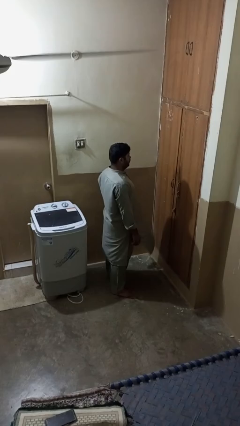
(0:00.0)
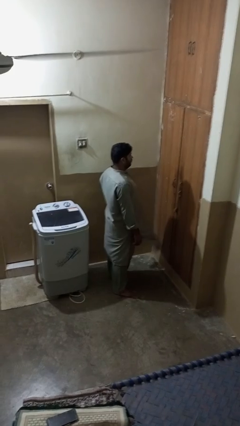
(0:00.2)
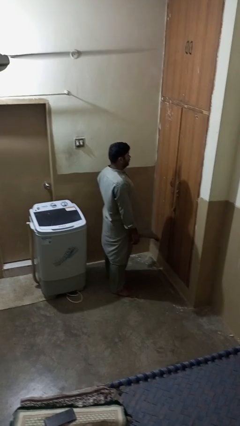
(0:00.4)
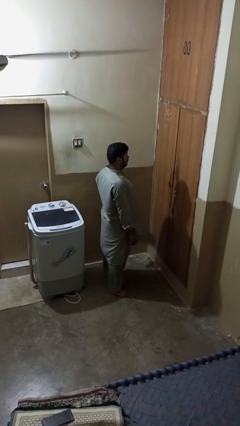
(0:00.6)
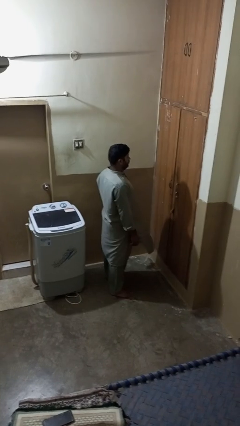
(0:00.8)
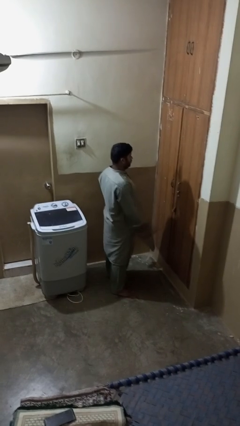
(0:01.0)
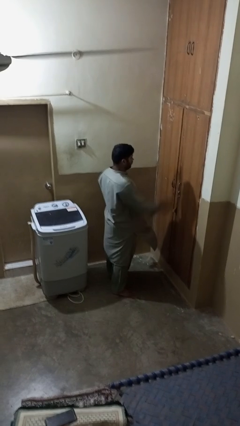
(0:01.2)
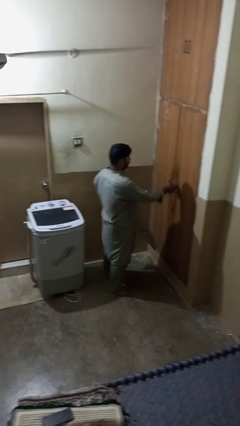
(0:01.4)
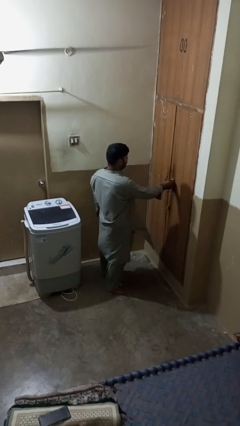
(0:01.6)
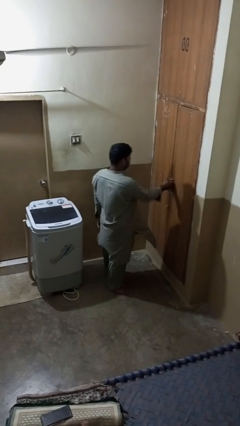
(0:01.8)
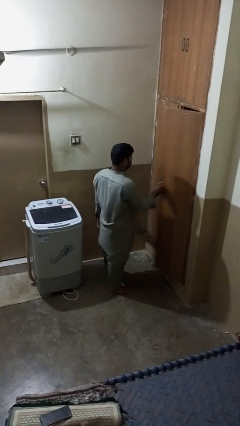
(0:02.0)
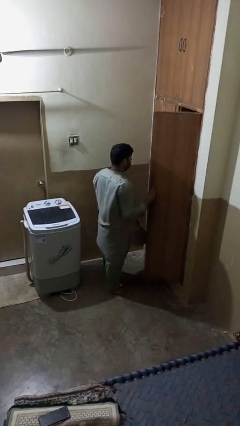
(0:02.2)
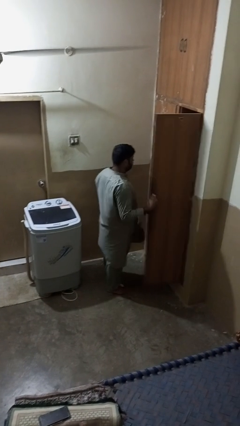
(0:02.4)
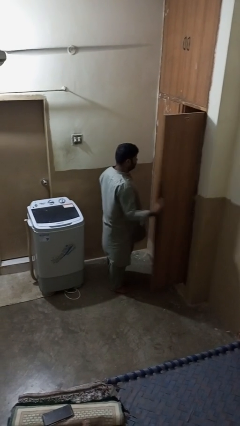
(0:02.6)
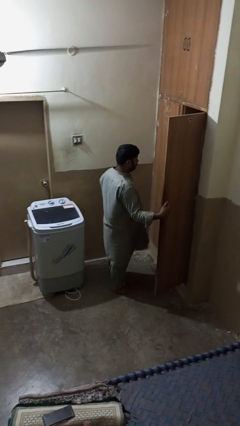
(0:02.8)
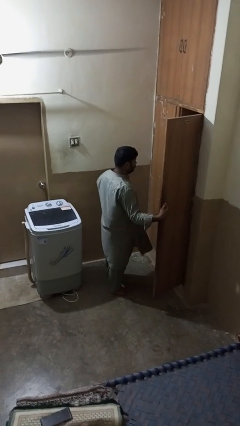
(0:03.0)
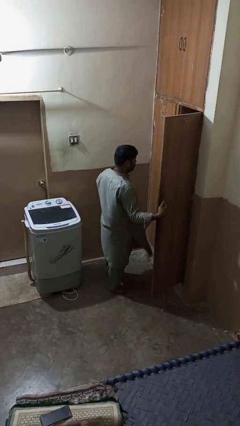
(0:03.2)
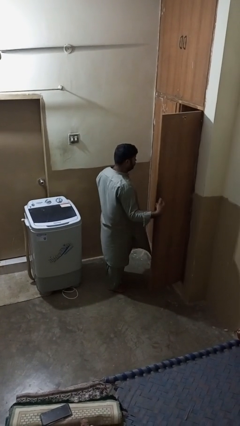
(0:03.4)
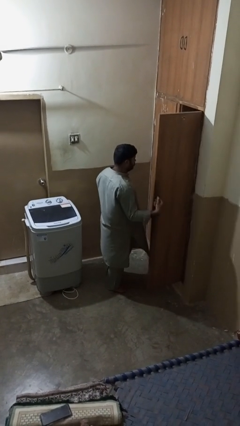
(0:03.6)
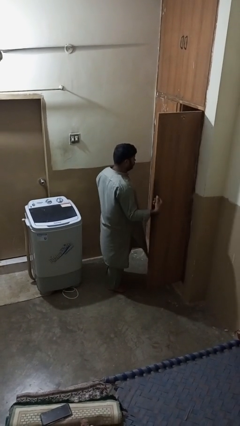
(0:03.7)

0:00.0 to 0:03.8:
person opens closet door

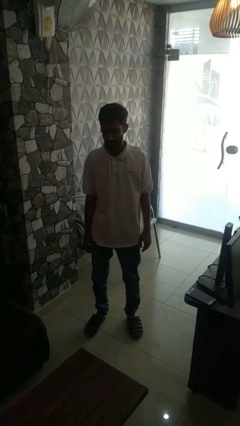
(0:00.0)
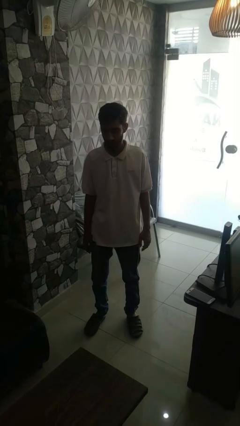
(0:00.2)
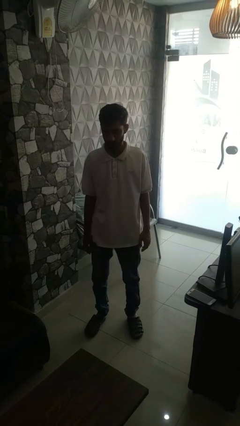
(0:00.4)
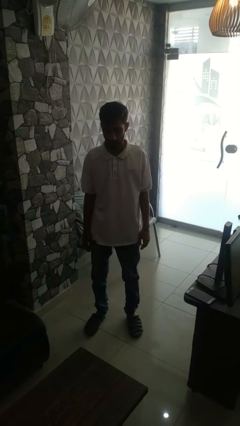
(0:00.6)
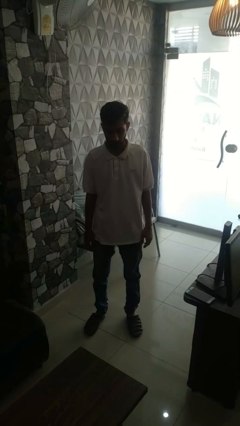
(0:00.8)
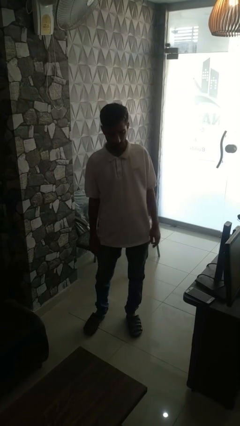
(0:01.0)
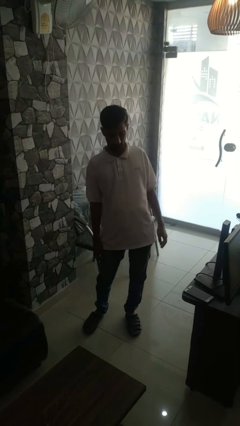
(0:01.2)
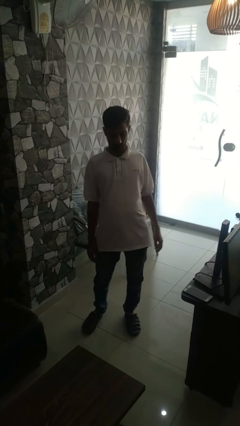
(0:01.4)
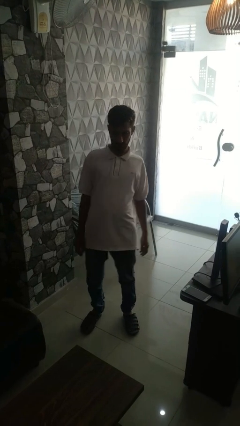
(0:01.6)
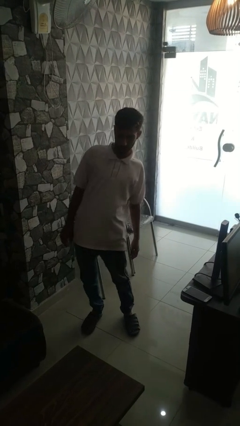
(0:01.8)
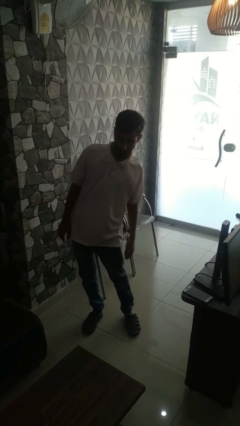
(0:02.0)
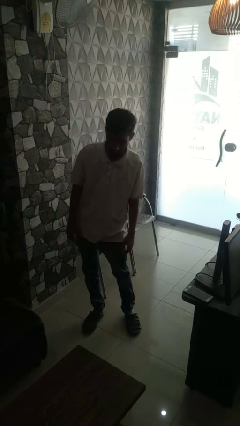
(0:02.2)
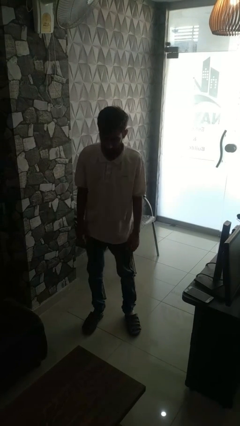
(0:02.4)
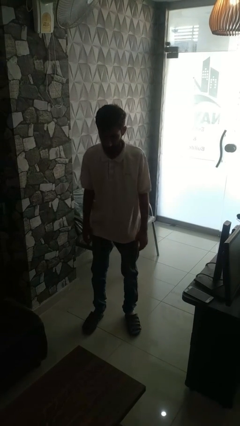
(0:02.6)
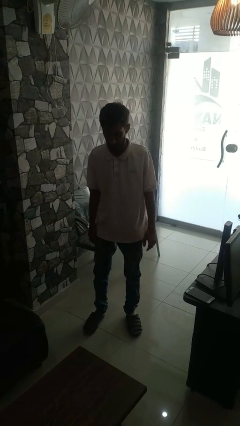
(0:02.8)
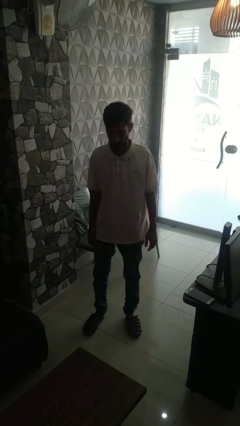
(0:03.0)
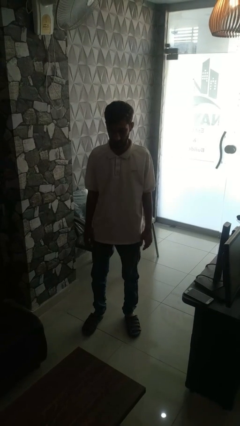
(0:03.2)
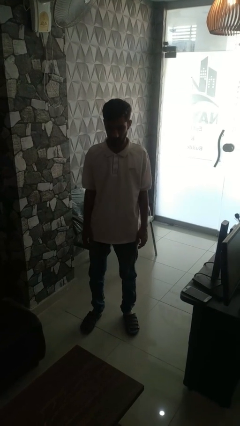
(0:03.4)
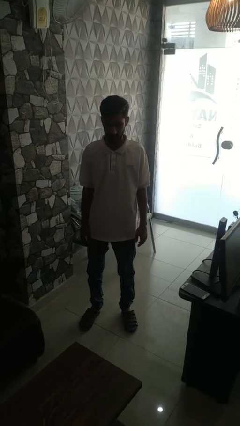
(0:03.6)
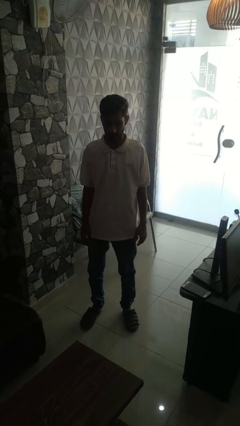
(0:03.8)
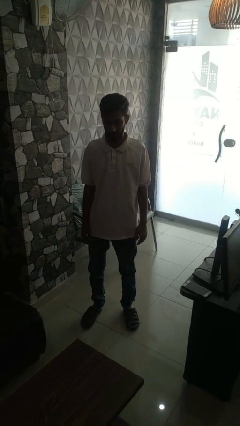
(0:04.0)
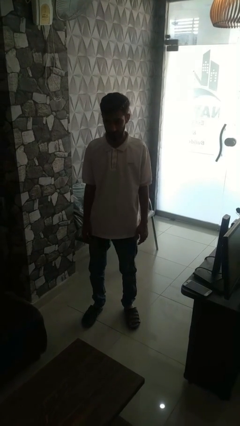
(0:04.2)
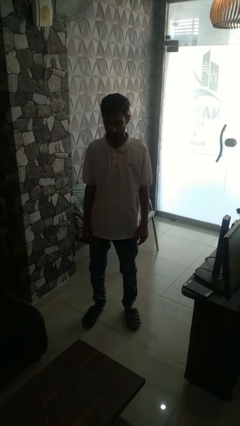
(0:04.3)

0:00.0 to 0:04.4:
person wiggles hips

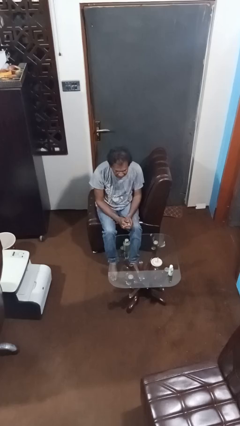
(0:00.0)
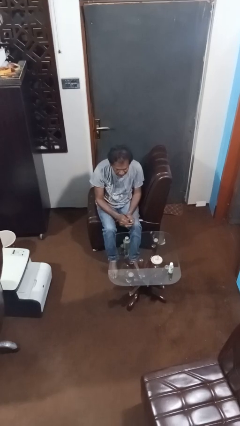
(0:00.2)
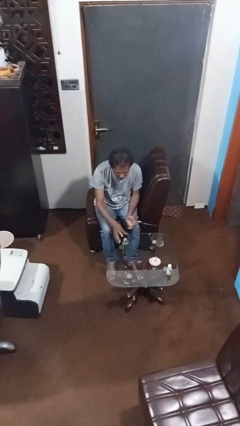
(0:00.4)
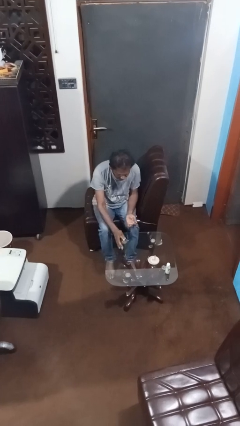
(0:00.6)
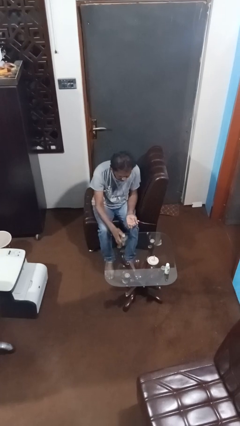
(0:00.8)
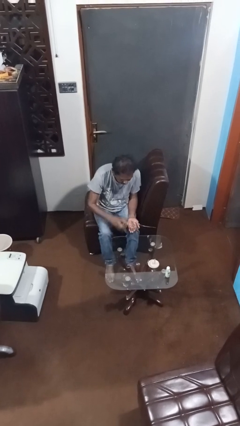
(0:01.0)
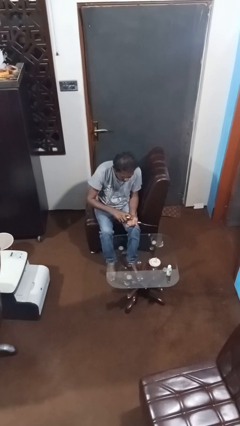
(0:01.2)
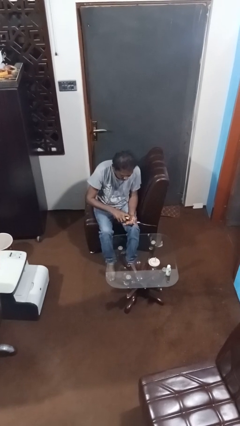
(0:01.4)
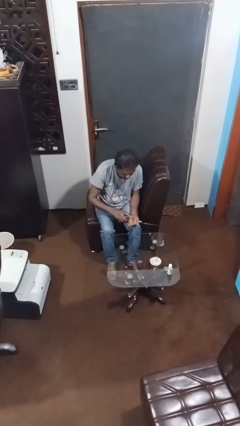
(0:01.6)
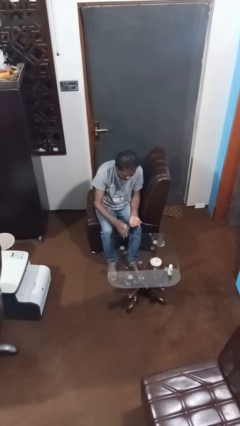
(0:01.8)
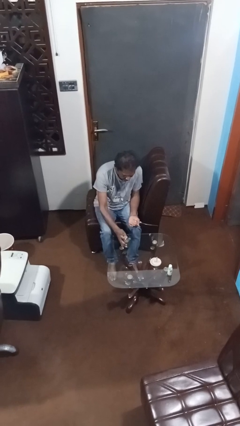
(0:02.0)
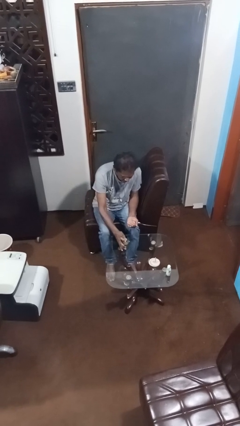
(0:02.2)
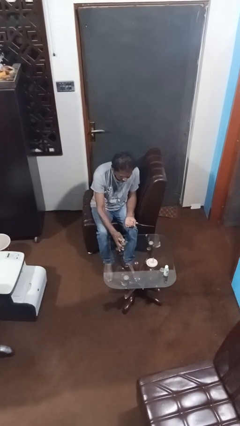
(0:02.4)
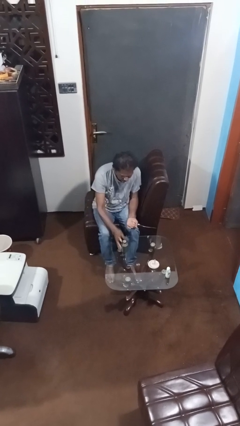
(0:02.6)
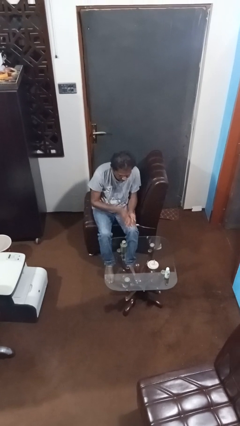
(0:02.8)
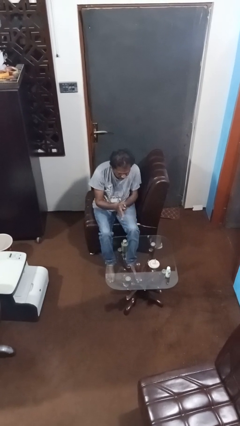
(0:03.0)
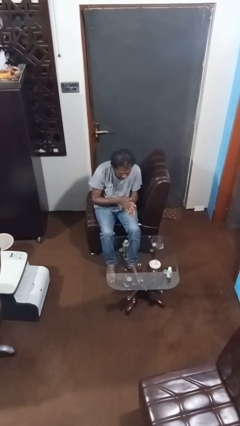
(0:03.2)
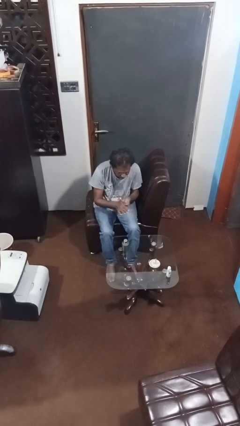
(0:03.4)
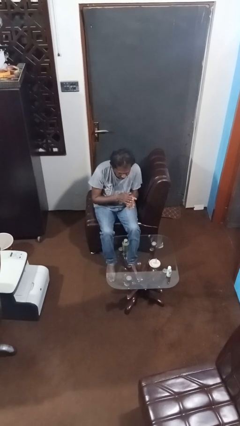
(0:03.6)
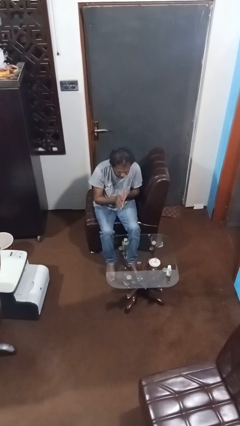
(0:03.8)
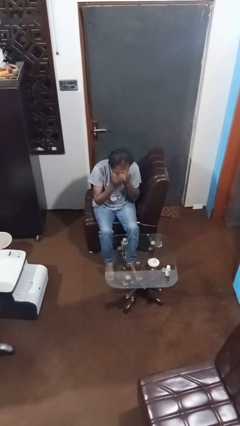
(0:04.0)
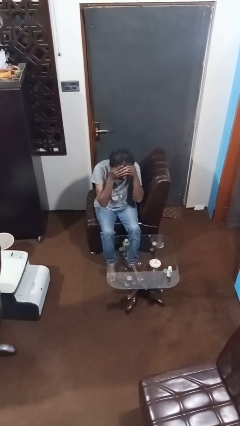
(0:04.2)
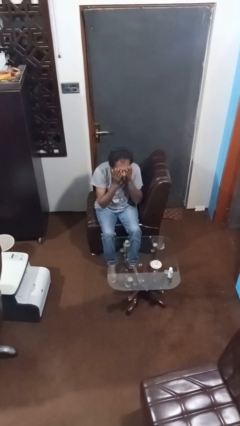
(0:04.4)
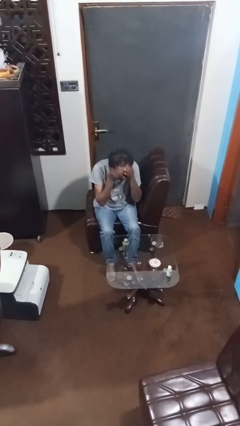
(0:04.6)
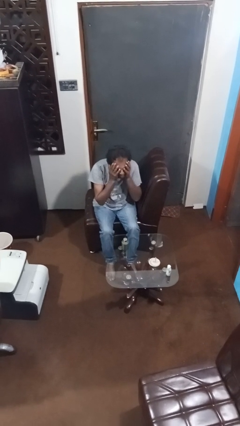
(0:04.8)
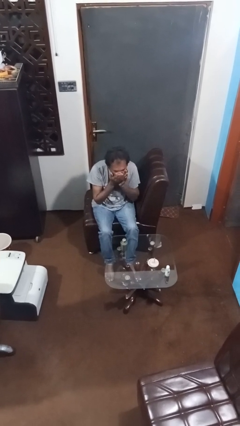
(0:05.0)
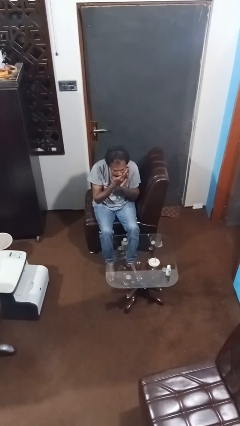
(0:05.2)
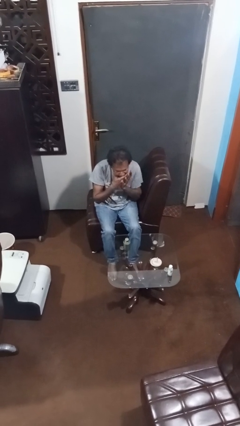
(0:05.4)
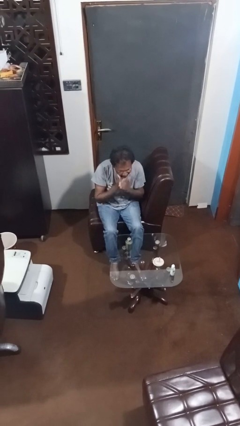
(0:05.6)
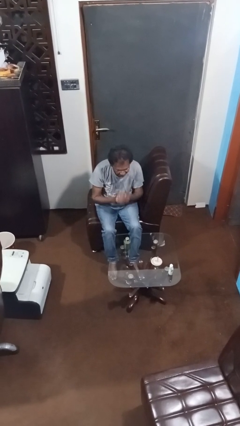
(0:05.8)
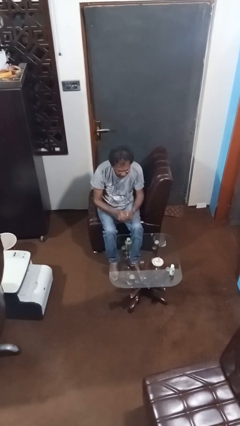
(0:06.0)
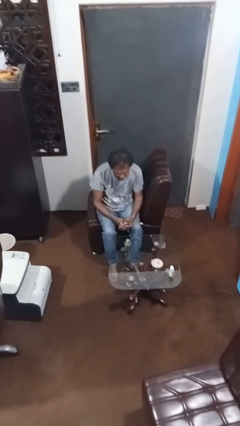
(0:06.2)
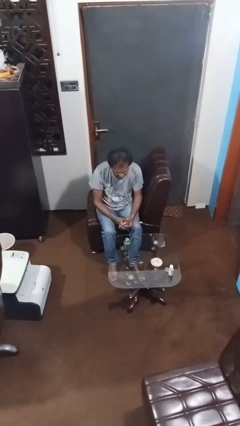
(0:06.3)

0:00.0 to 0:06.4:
person applies facial moisturizer

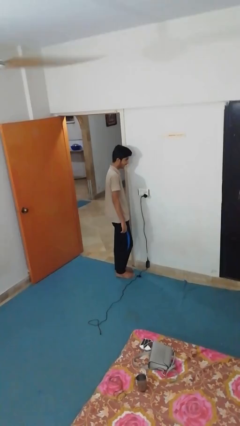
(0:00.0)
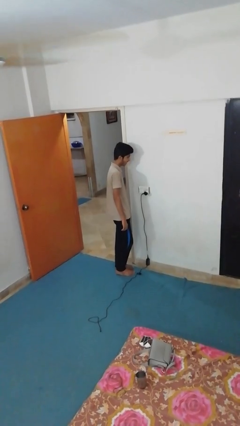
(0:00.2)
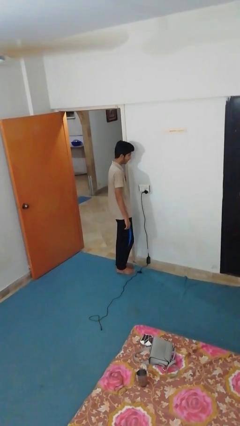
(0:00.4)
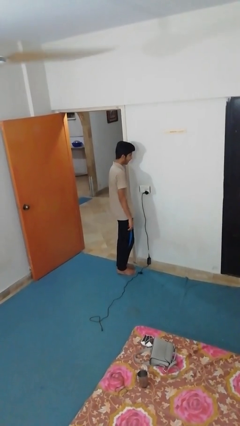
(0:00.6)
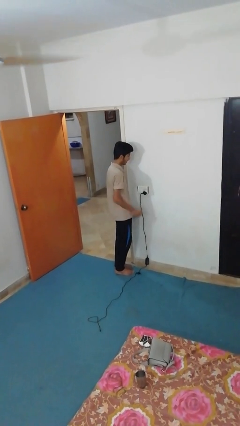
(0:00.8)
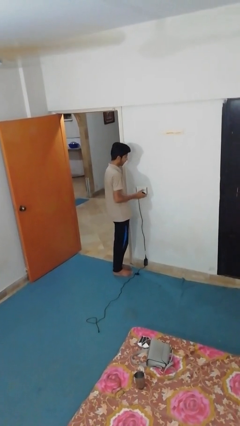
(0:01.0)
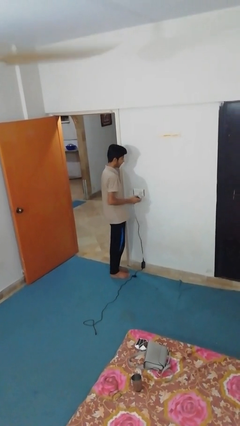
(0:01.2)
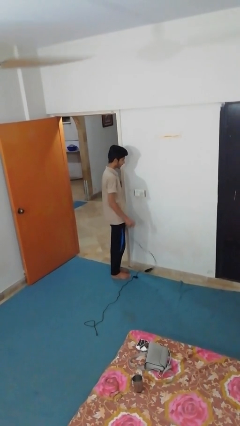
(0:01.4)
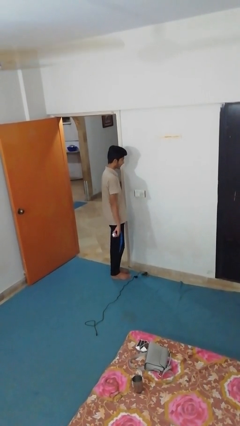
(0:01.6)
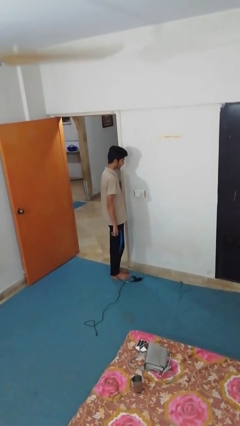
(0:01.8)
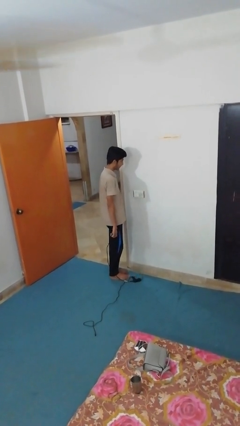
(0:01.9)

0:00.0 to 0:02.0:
person unplugs from electrical socket

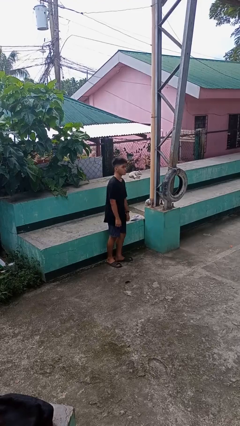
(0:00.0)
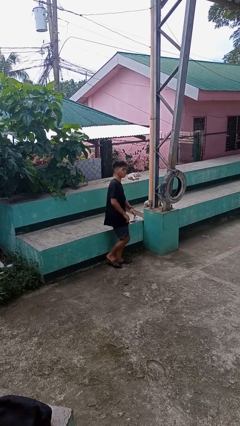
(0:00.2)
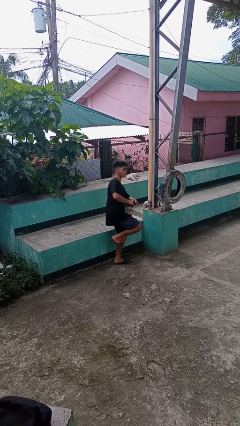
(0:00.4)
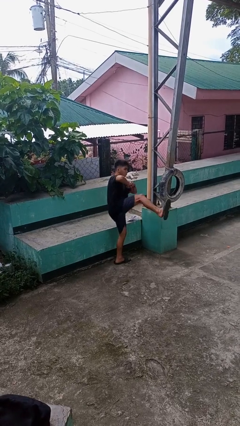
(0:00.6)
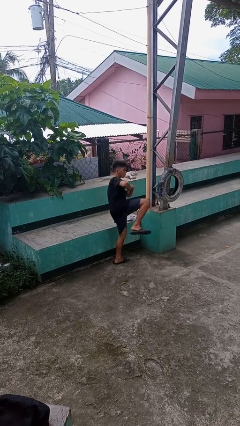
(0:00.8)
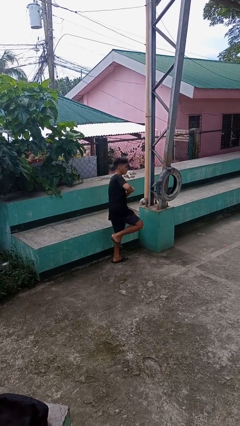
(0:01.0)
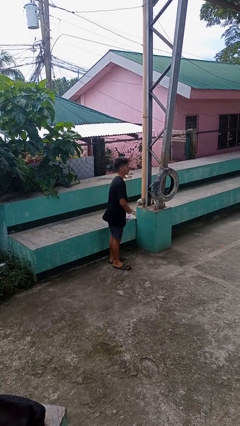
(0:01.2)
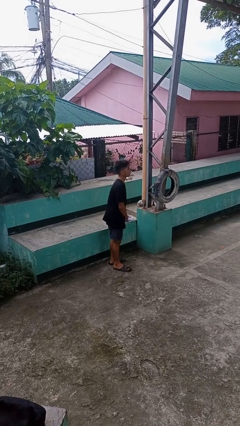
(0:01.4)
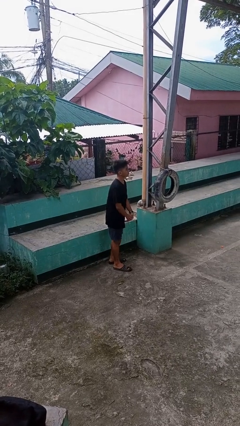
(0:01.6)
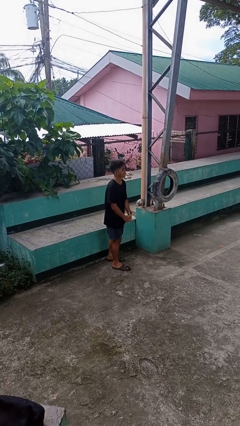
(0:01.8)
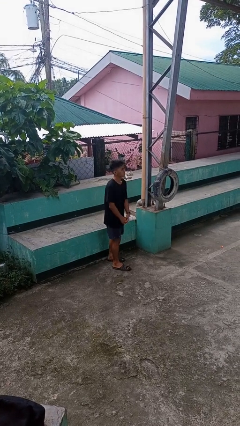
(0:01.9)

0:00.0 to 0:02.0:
person karate kicks
